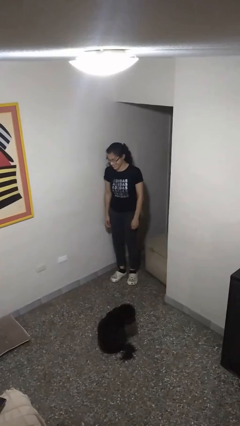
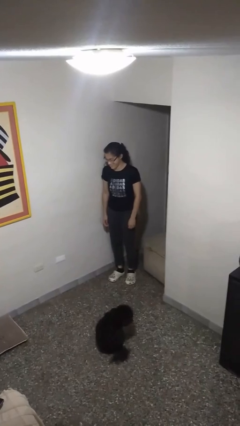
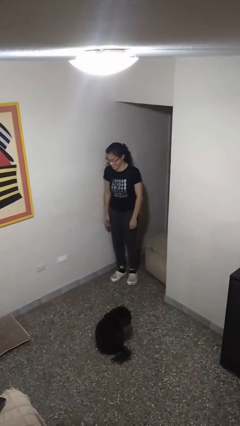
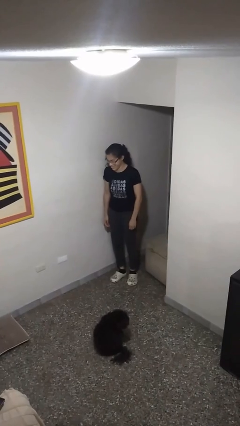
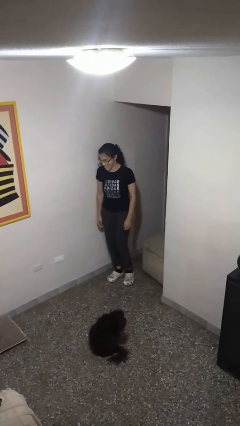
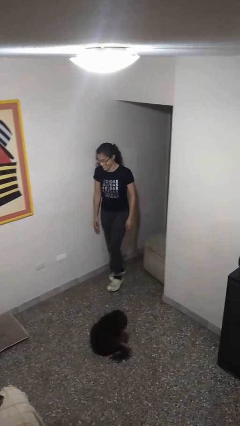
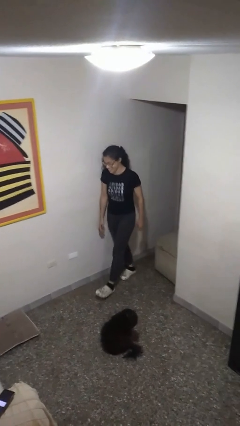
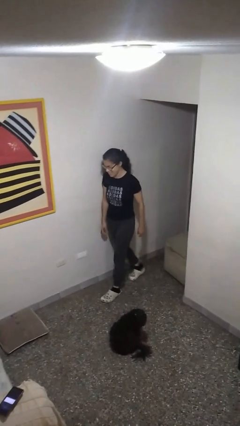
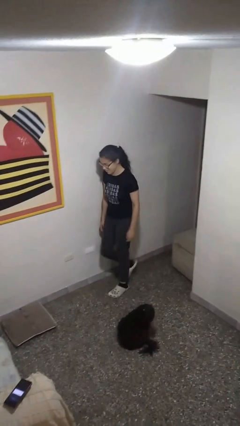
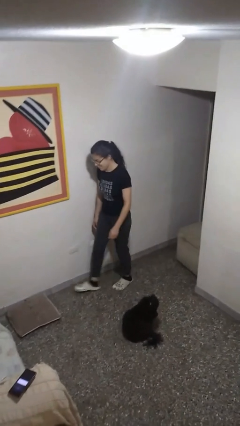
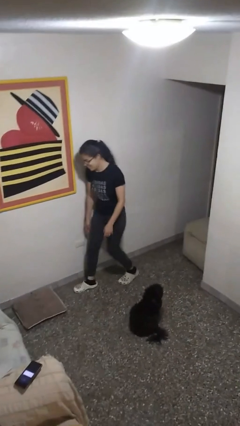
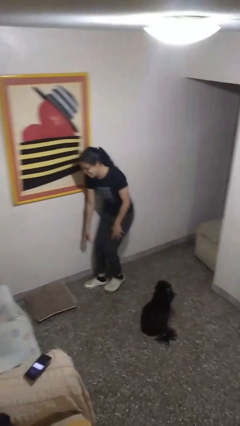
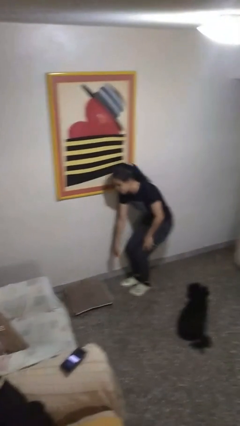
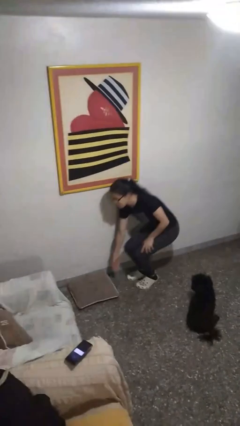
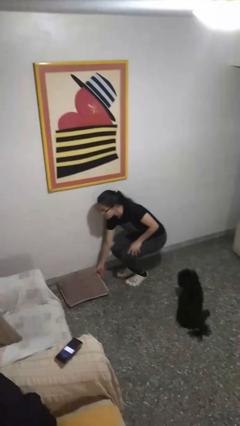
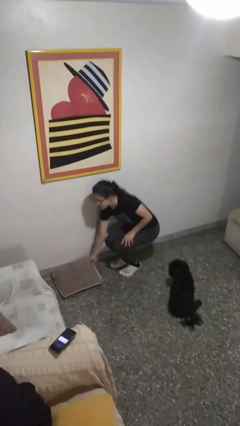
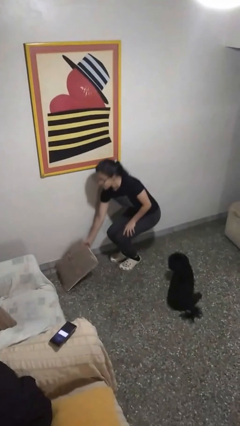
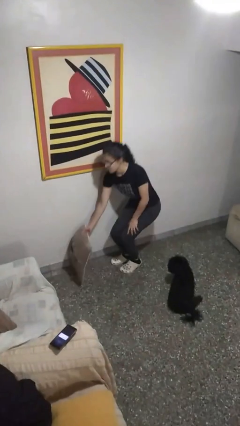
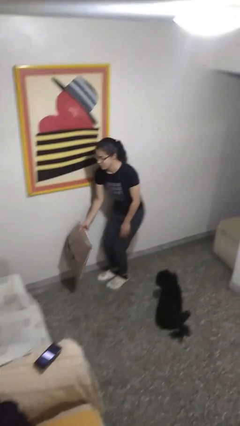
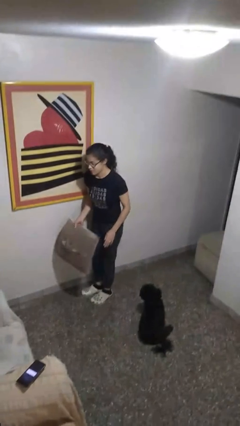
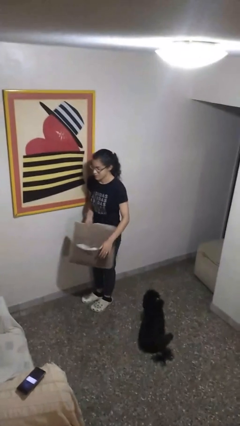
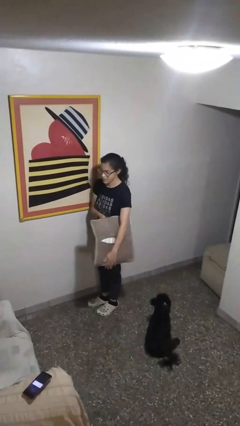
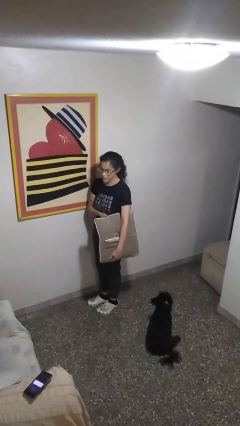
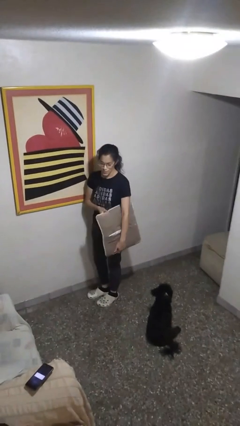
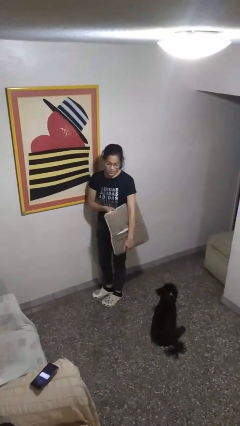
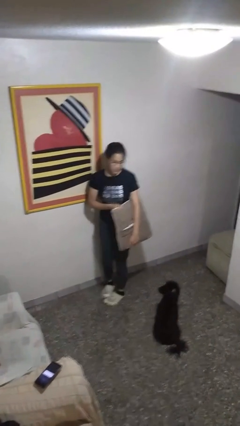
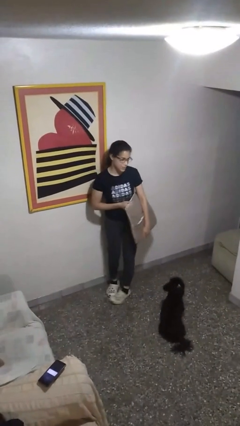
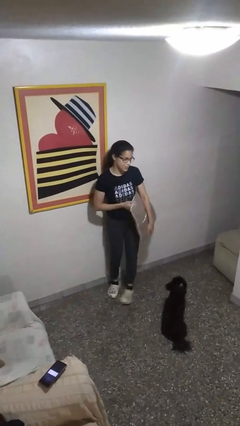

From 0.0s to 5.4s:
person picks up object from floor

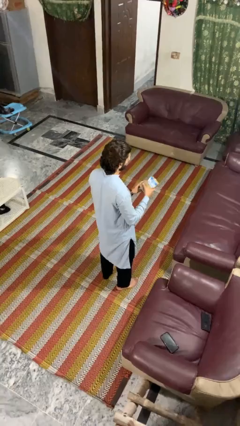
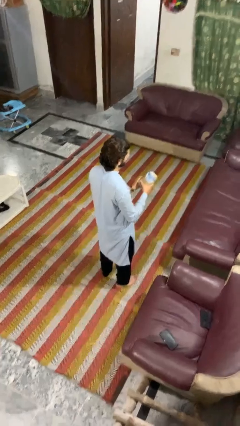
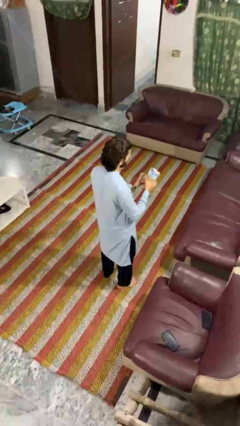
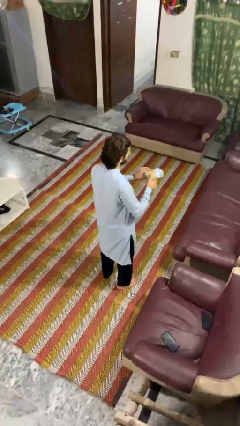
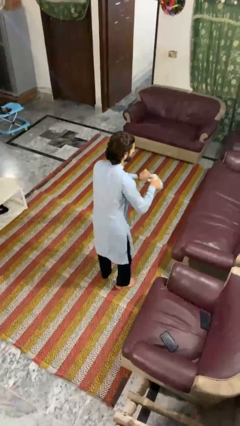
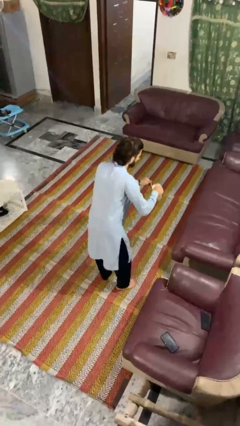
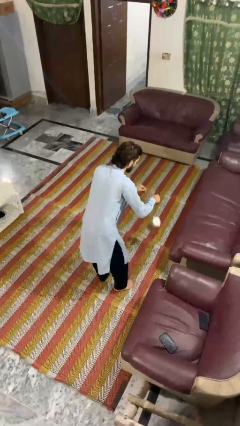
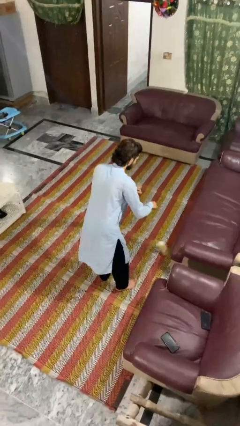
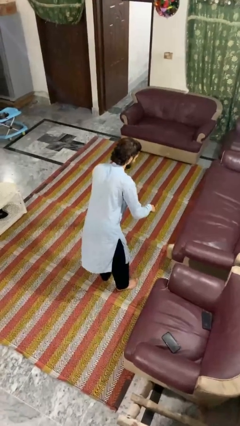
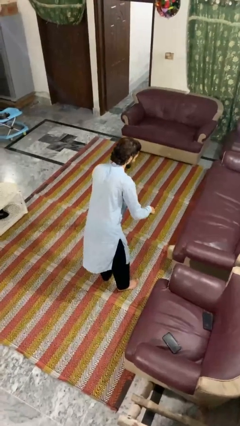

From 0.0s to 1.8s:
person drops object

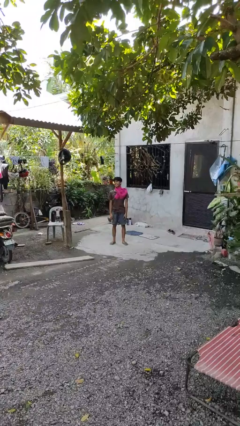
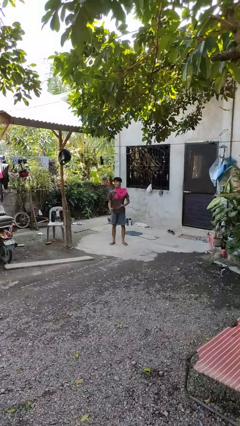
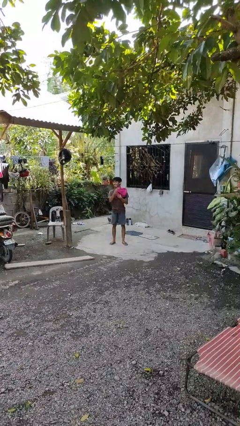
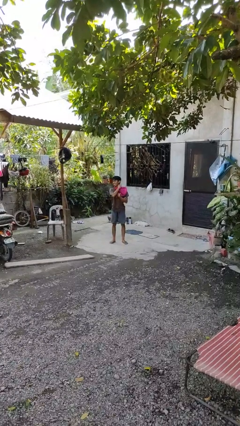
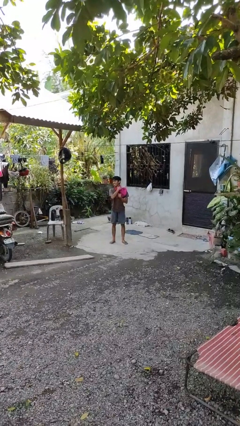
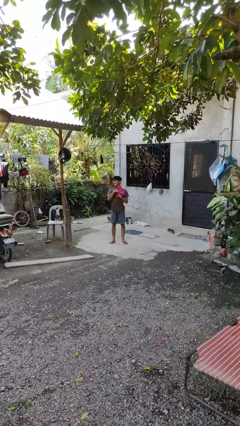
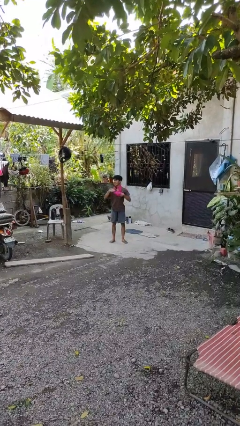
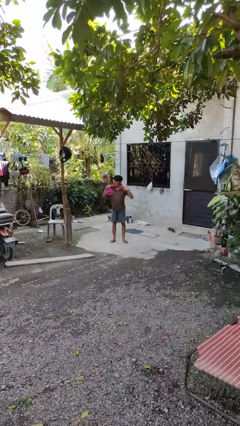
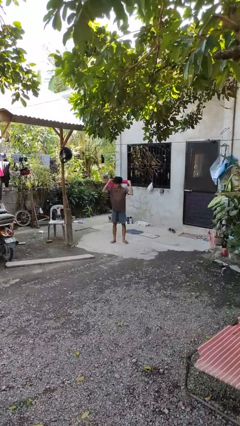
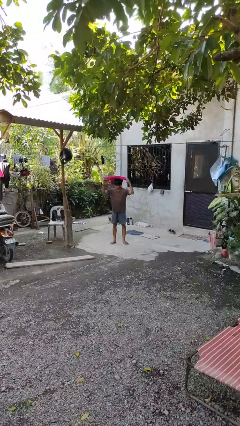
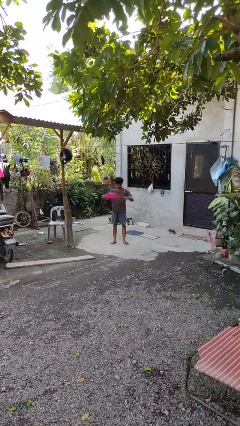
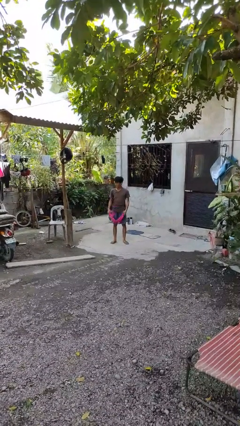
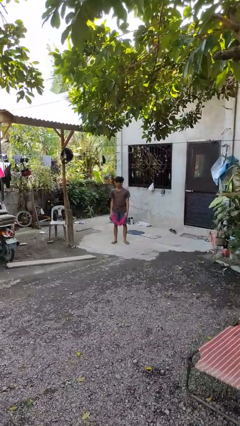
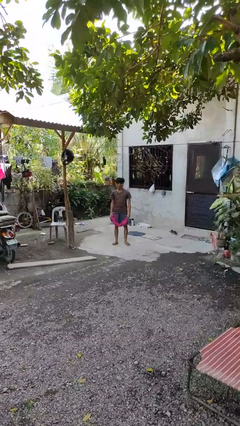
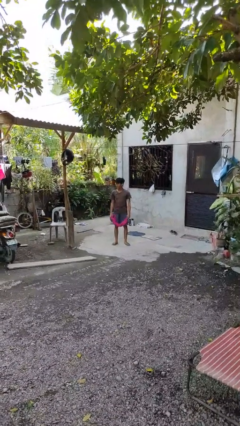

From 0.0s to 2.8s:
person takes off scarf

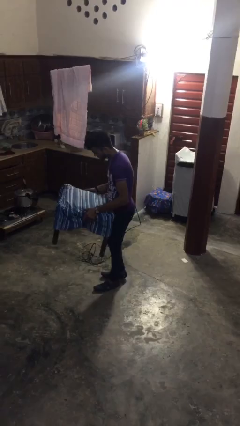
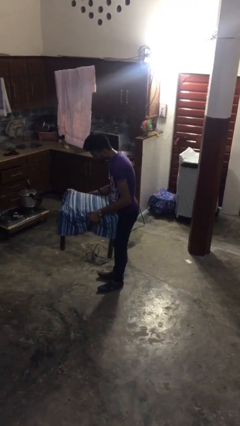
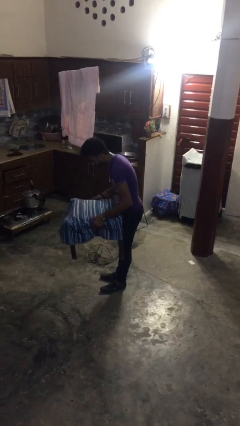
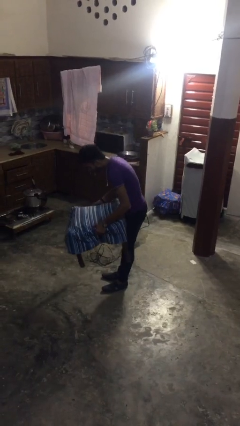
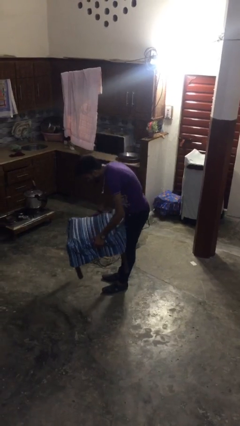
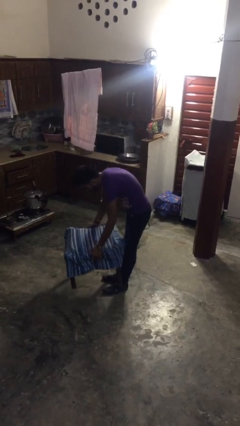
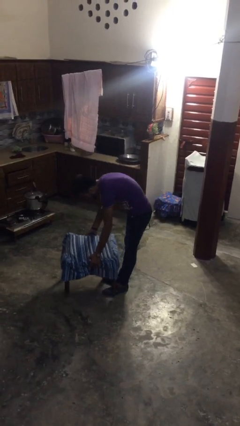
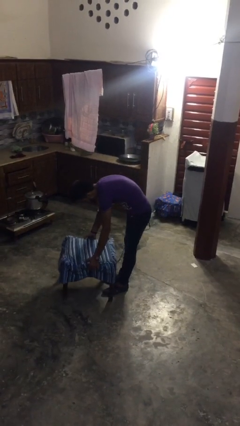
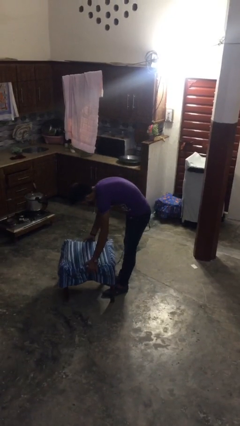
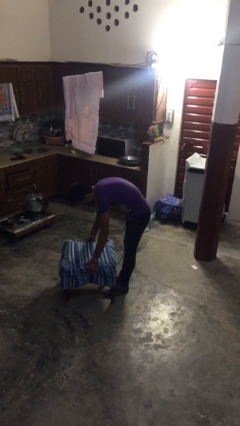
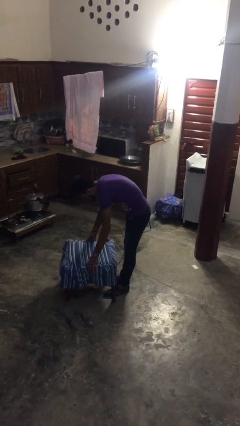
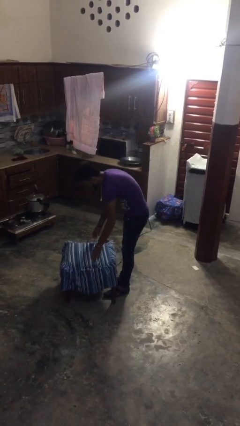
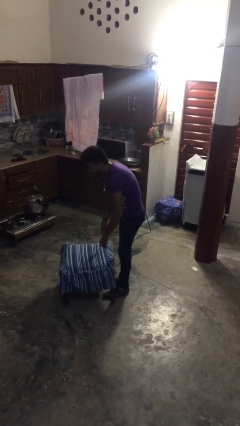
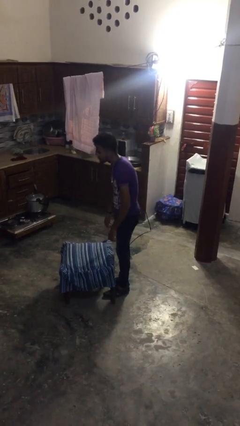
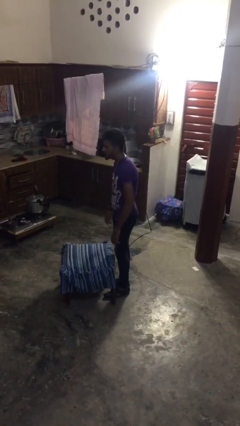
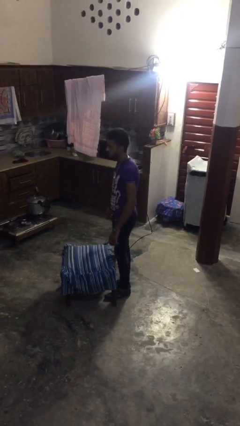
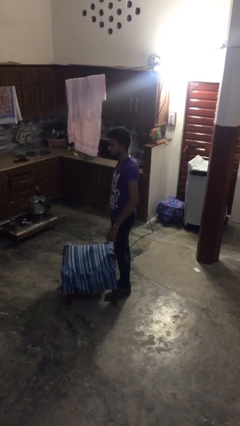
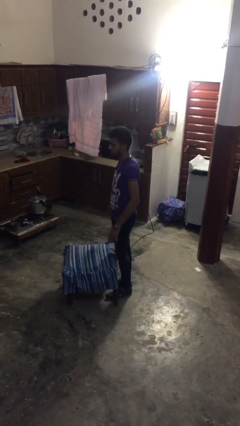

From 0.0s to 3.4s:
person puts down object on floor

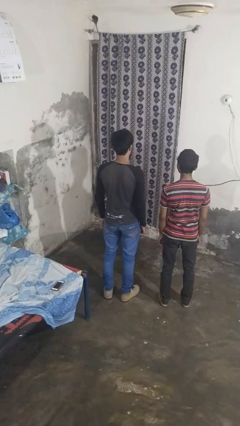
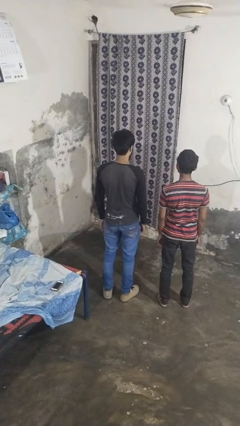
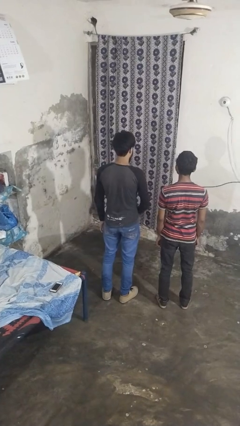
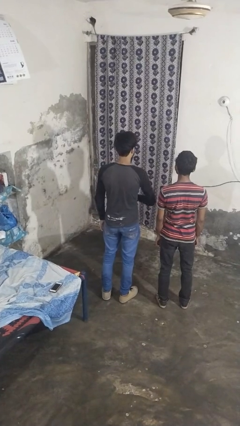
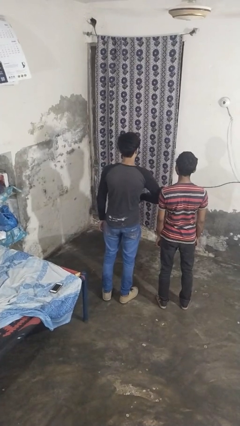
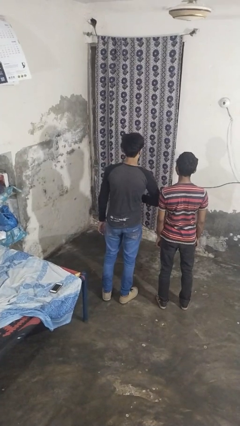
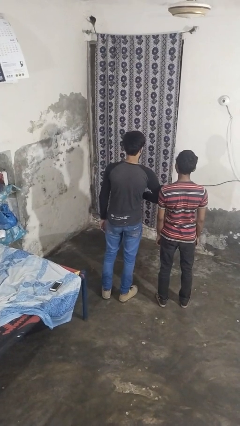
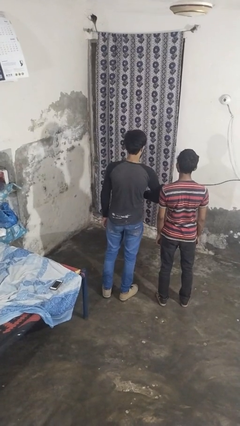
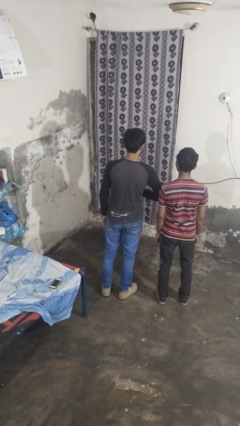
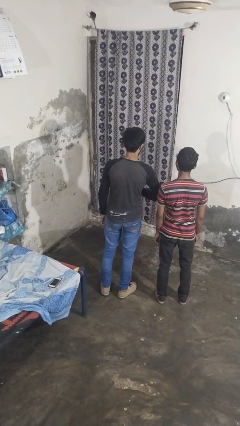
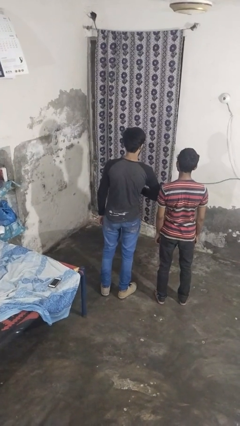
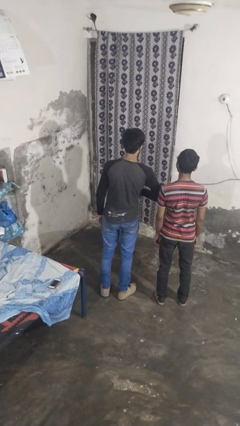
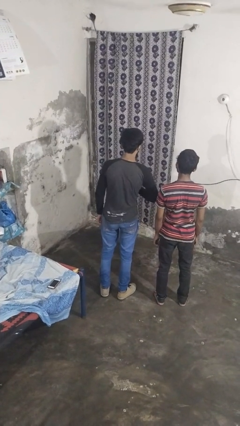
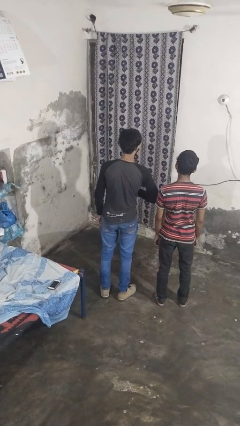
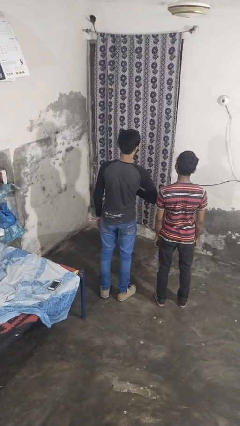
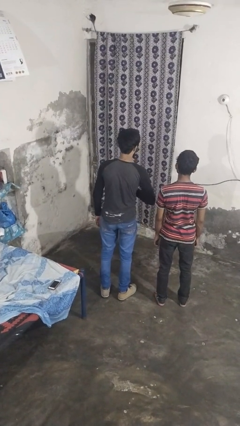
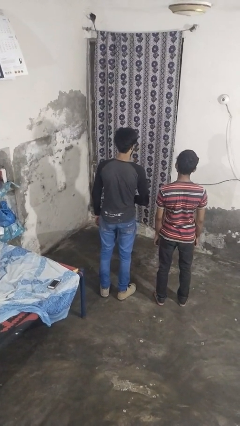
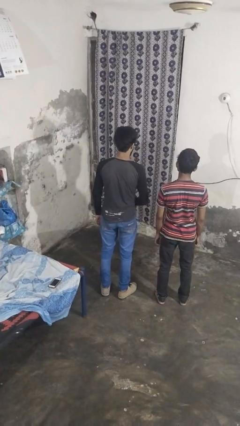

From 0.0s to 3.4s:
person nudges person with elbow

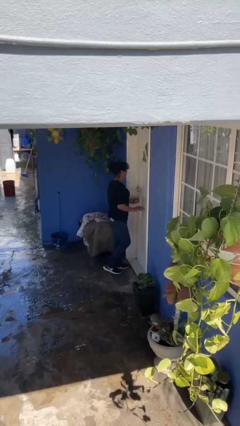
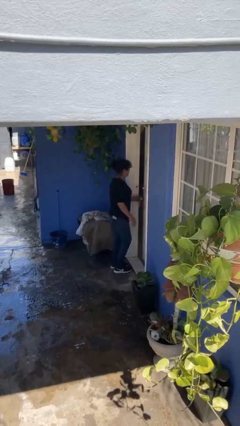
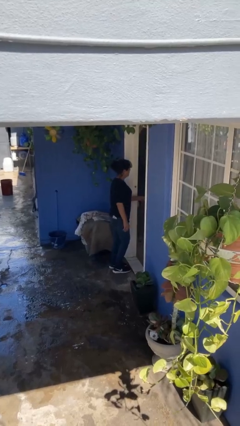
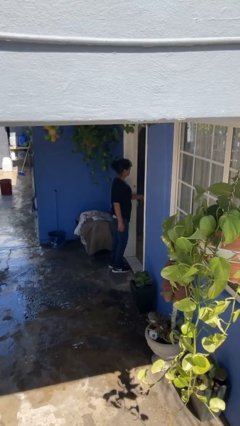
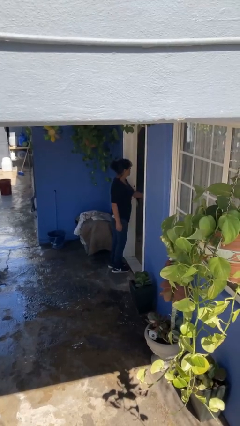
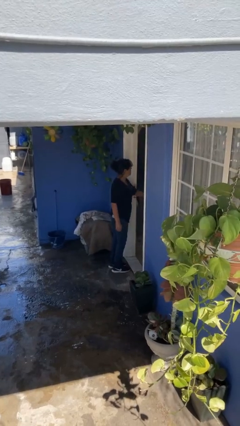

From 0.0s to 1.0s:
person opens facility door
